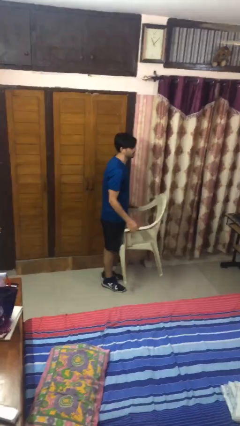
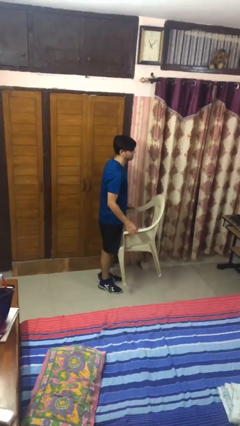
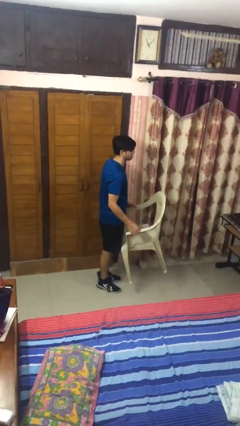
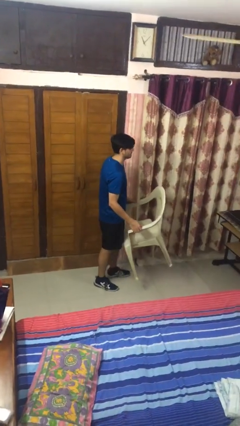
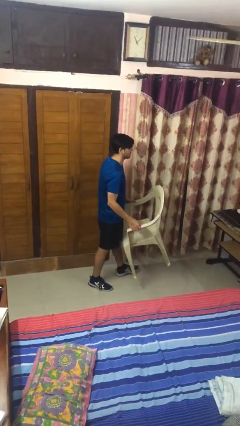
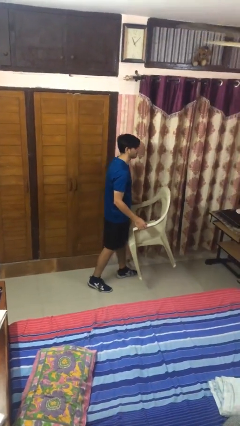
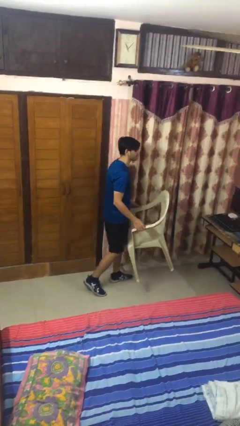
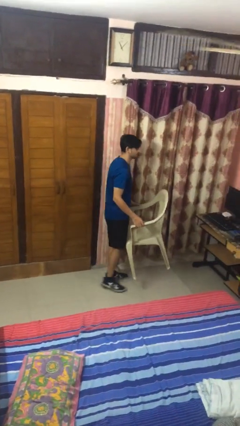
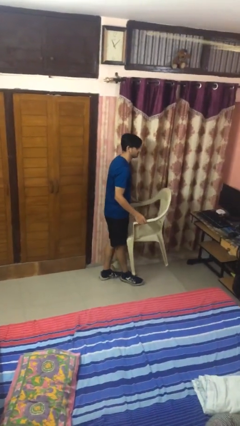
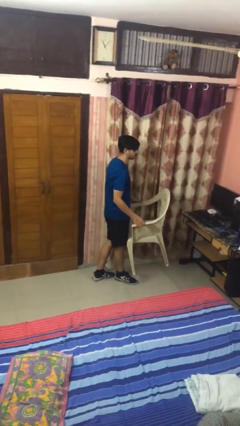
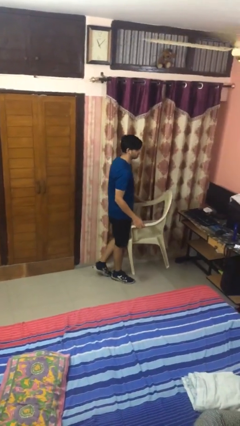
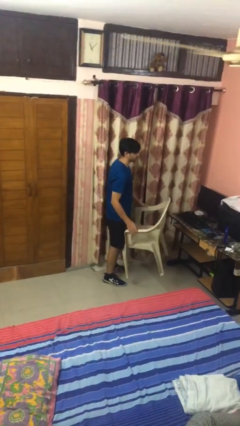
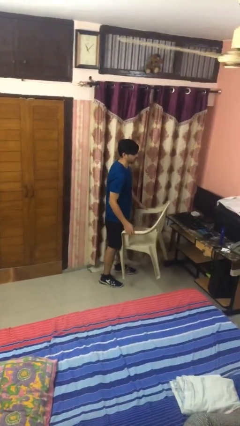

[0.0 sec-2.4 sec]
person carries furniture

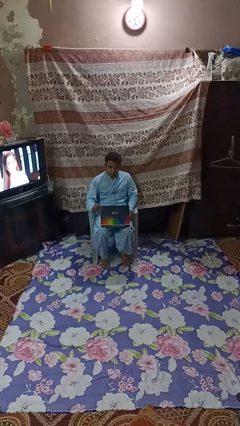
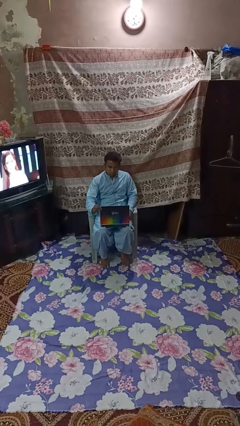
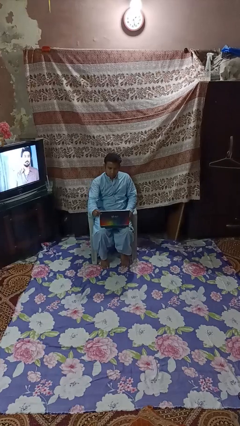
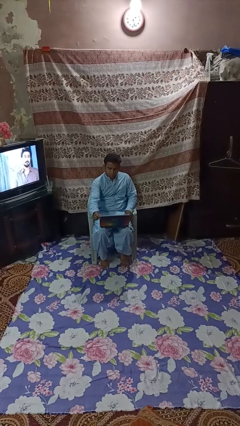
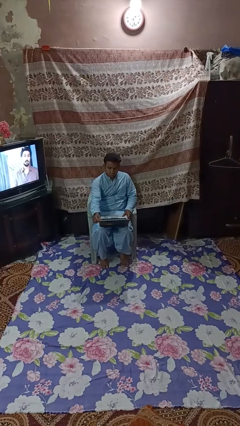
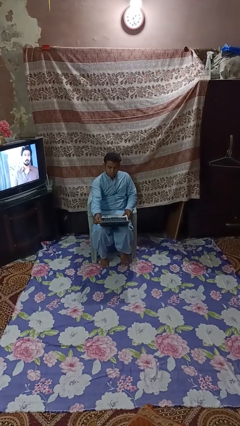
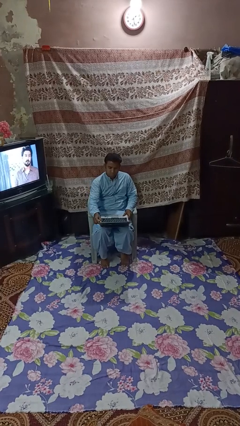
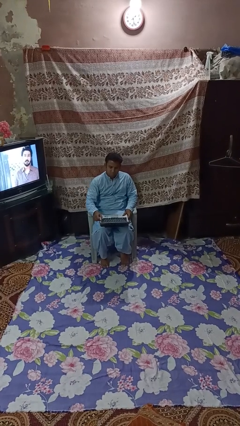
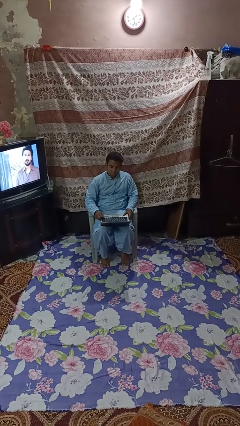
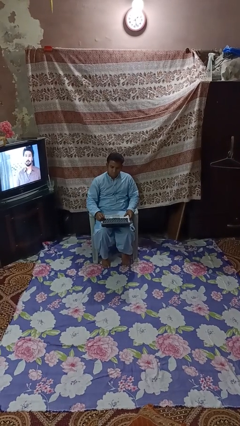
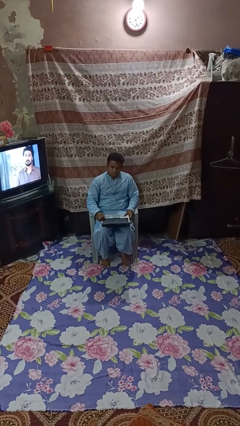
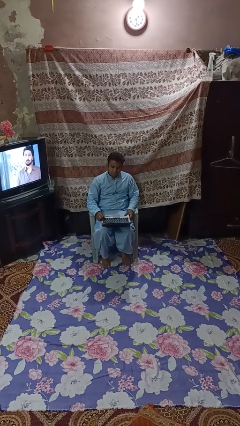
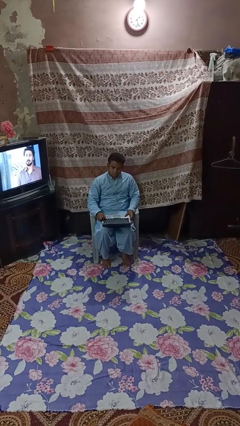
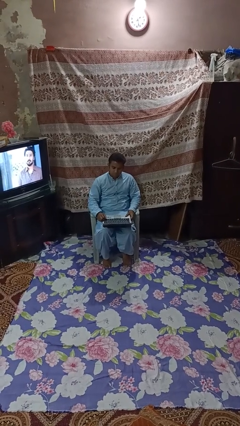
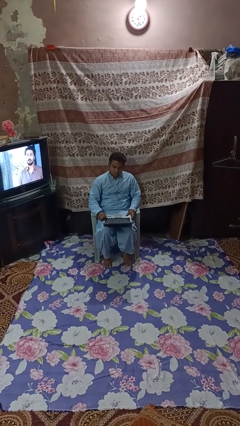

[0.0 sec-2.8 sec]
person opens laptop

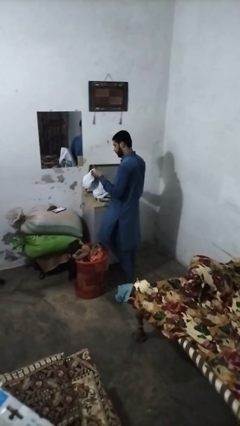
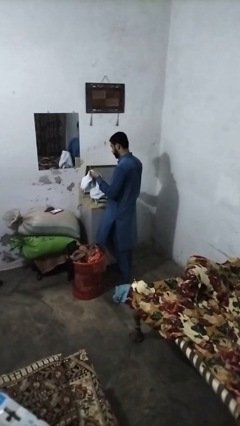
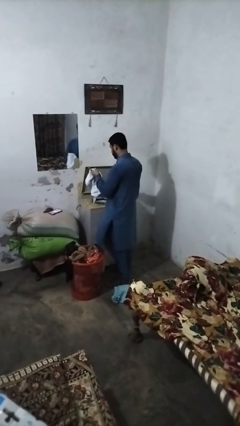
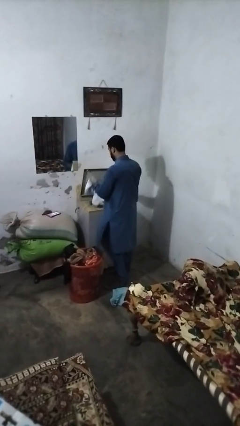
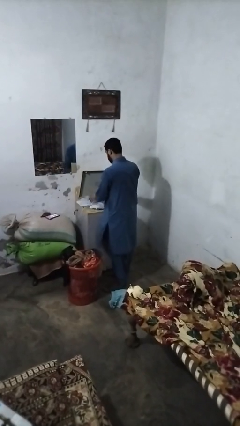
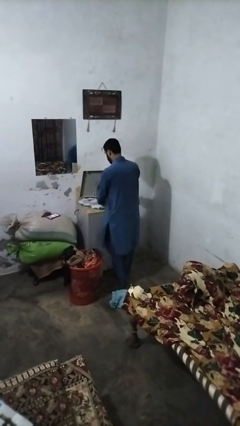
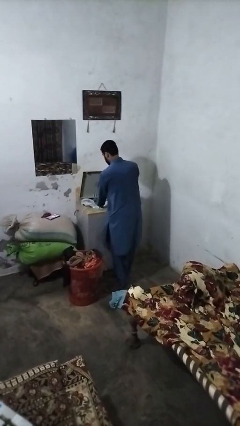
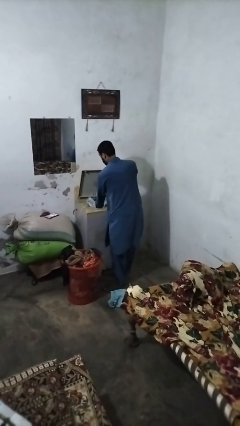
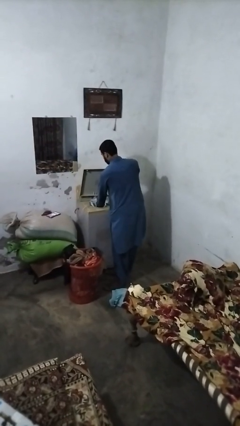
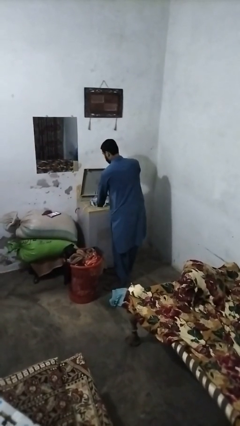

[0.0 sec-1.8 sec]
person loads clotheswasher

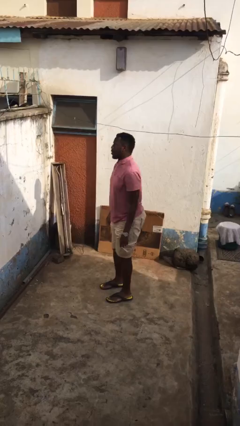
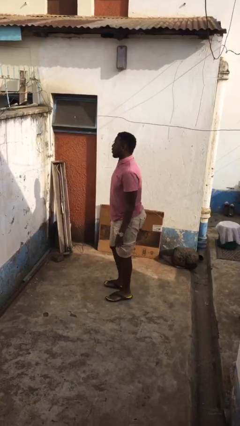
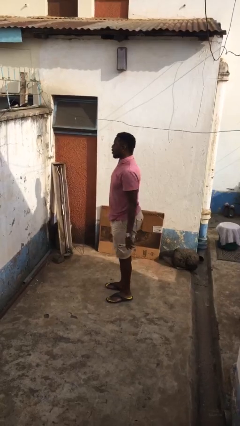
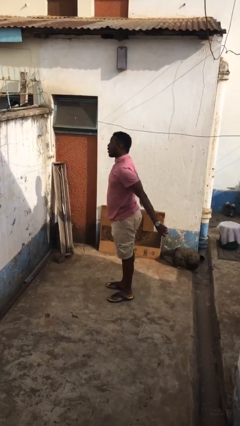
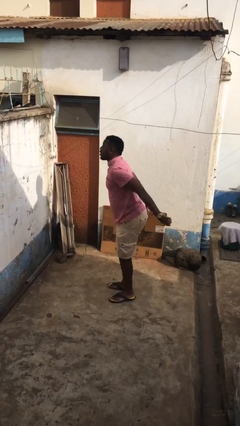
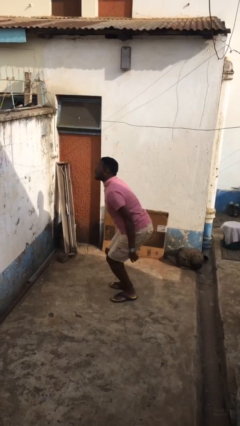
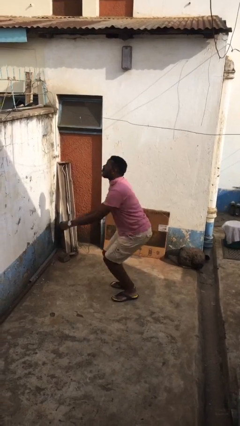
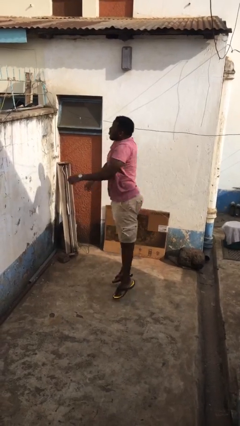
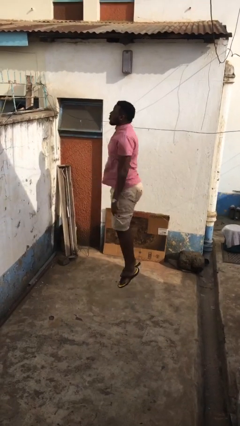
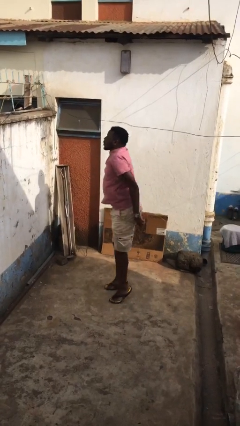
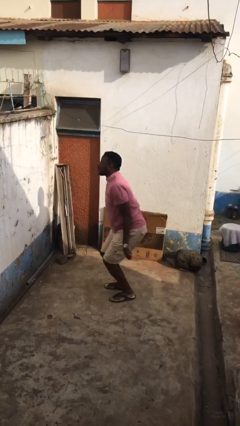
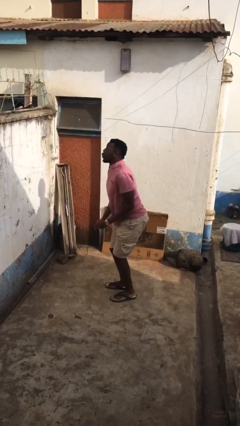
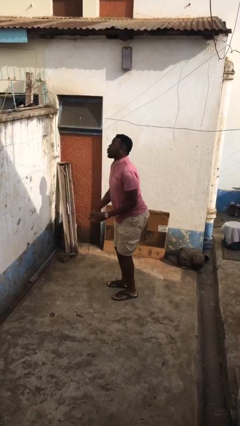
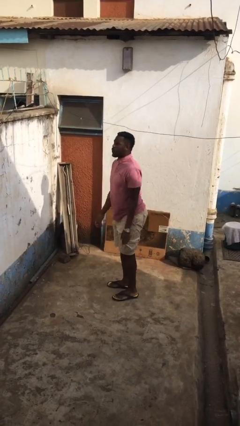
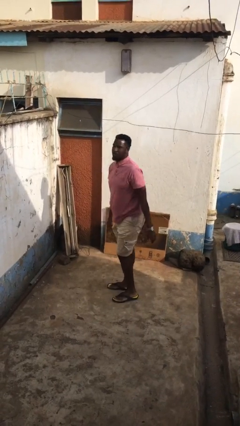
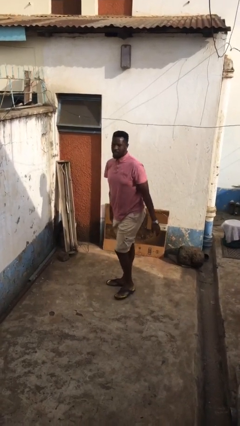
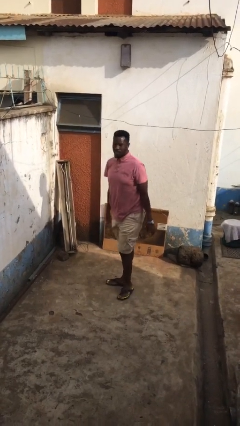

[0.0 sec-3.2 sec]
person jumps

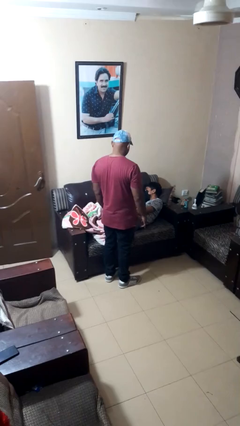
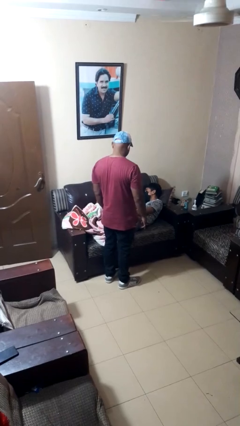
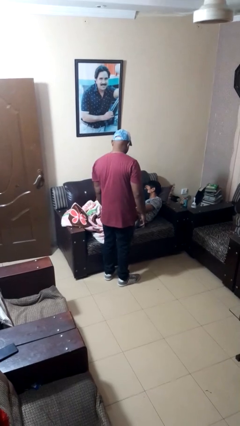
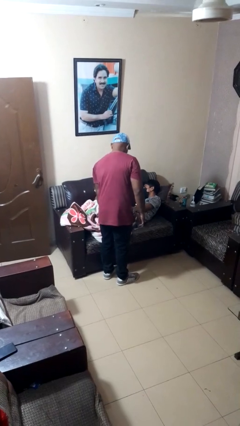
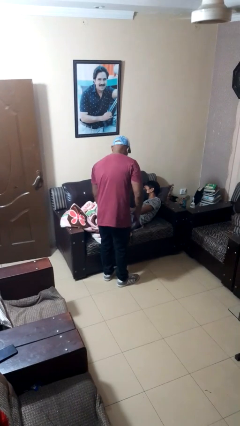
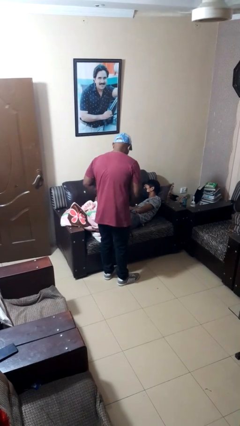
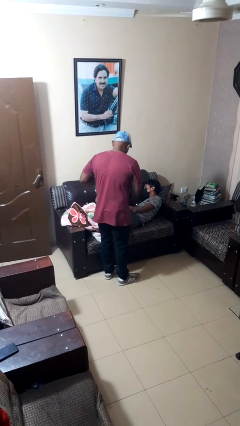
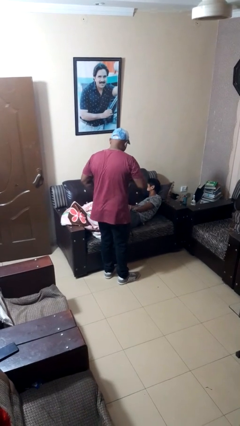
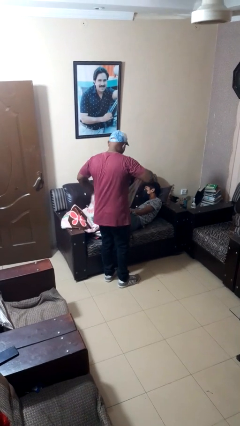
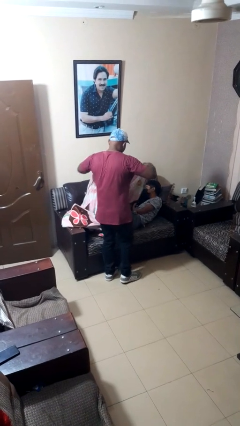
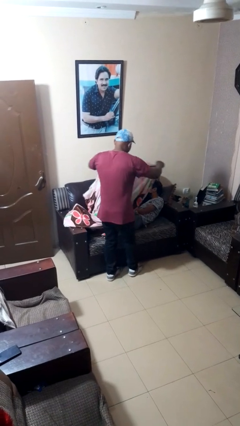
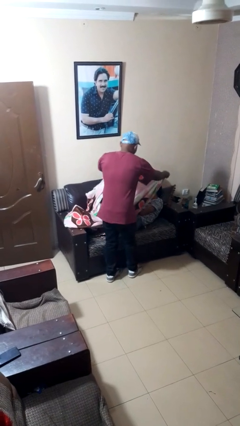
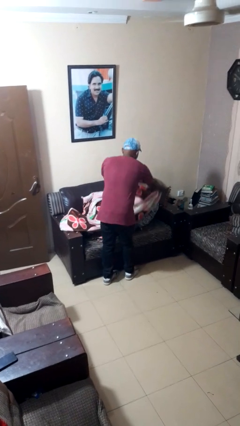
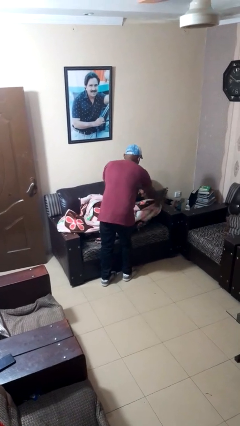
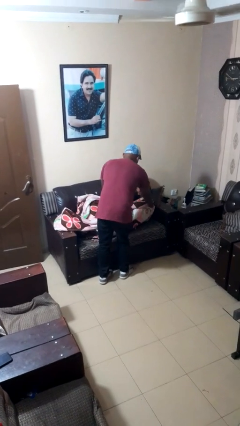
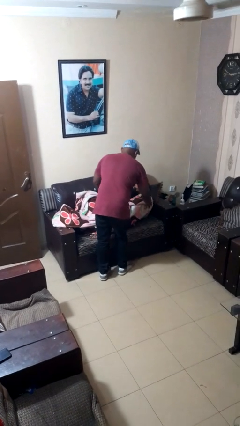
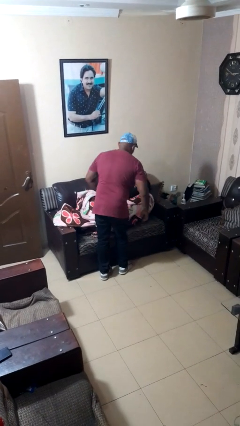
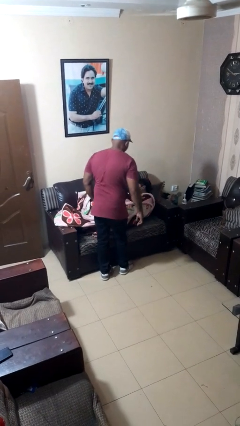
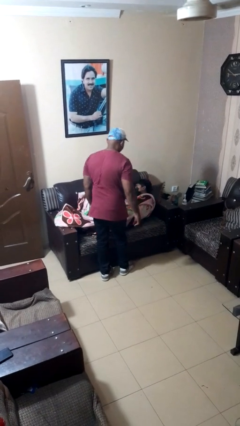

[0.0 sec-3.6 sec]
person covers friend with blanket

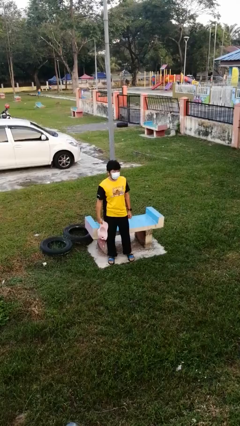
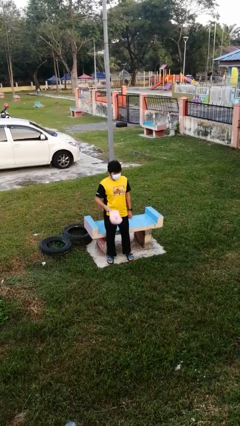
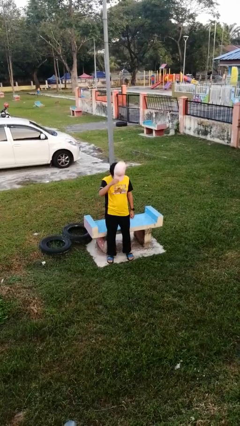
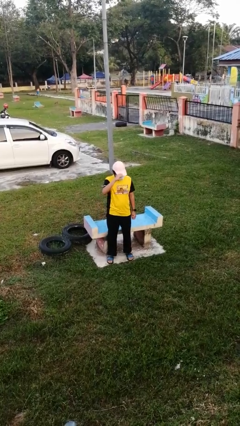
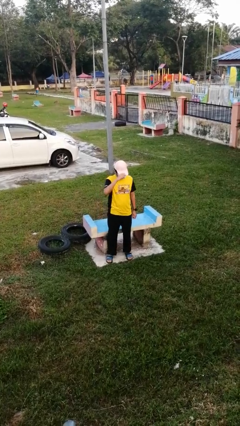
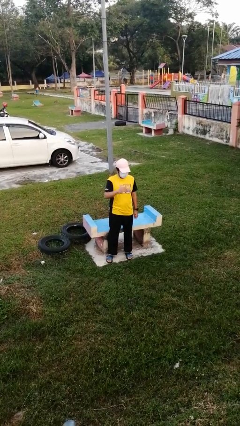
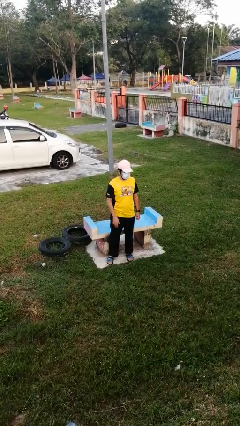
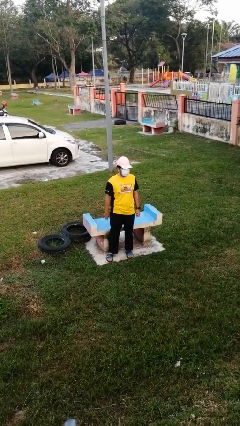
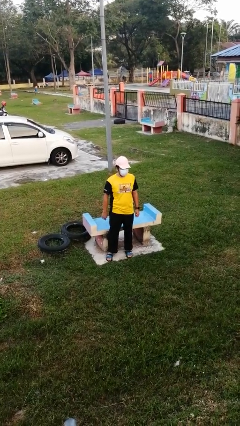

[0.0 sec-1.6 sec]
person puts on hat

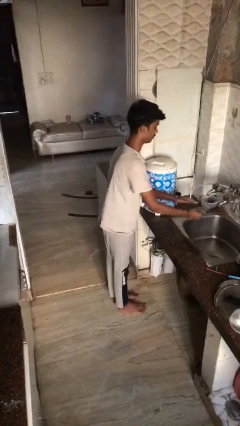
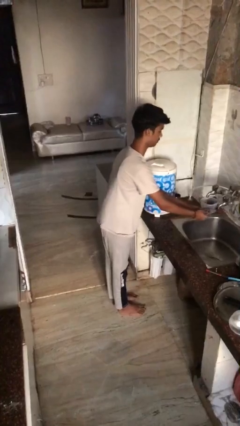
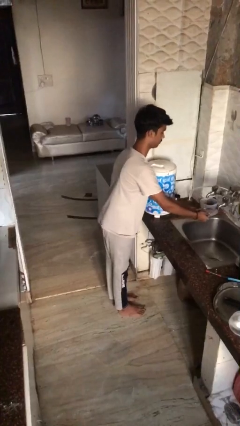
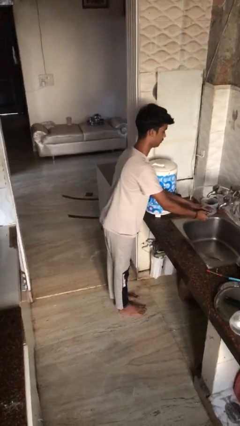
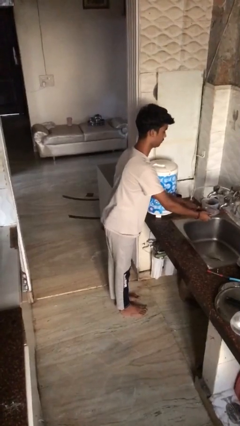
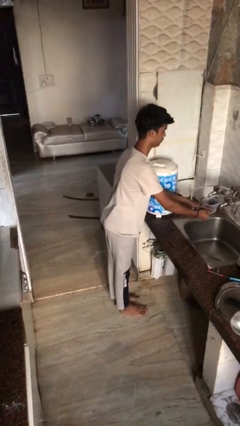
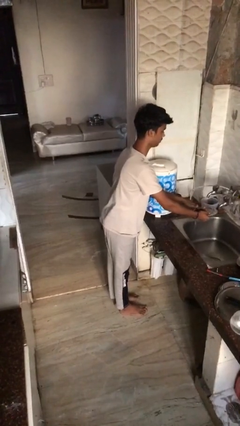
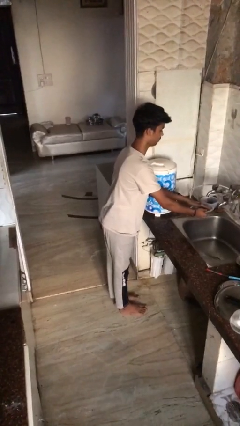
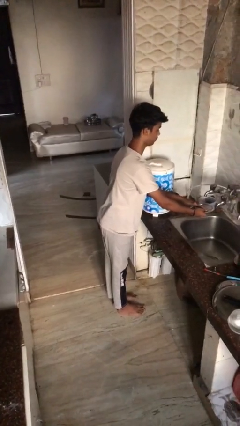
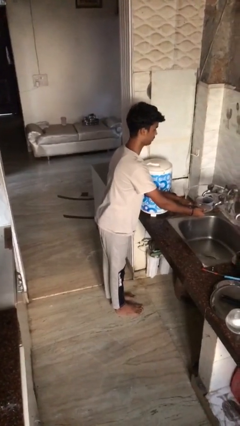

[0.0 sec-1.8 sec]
person washes dish
